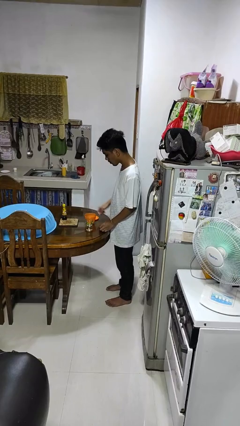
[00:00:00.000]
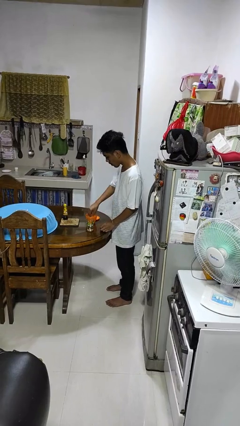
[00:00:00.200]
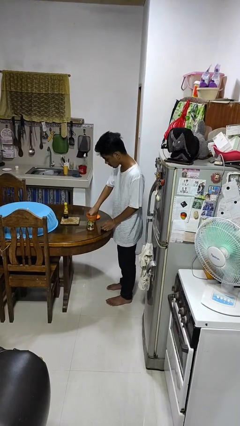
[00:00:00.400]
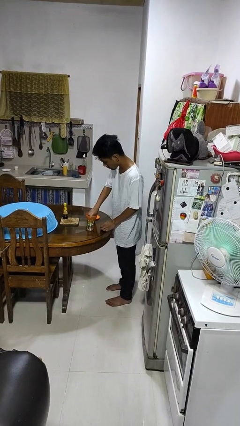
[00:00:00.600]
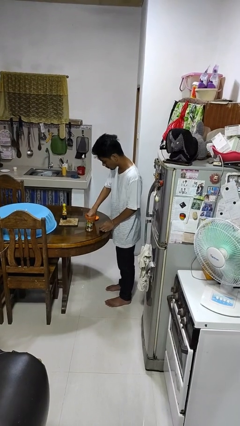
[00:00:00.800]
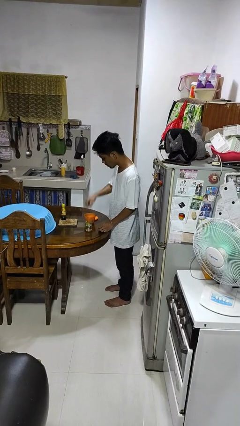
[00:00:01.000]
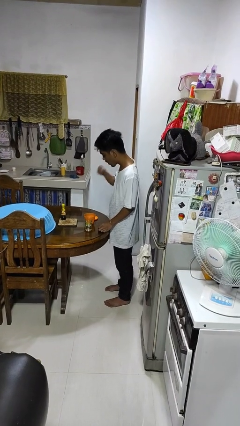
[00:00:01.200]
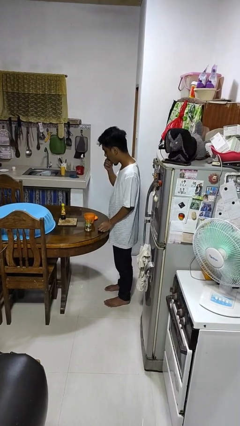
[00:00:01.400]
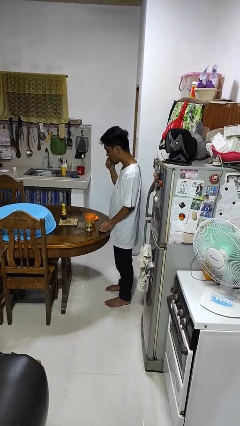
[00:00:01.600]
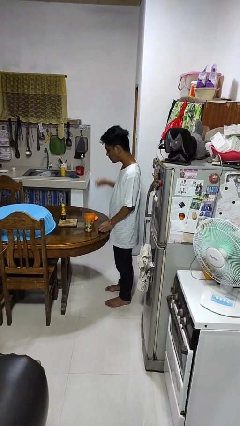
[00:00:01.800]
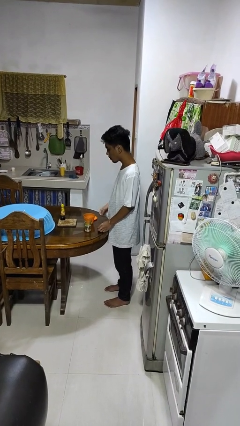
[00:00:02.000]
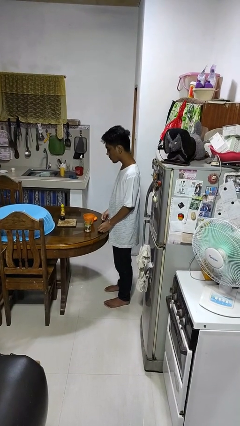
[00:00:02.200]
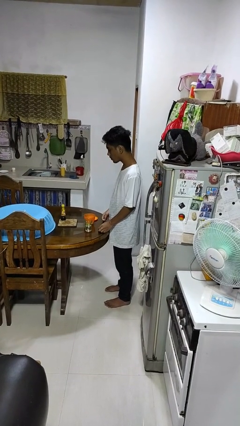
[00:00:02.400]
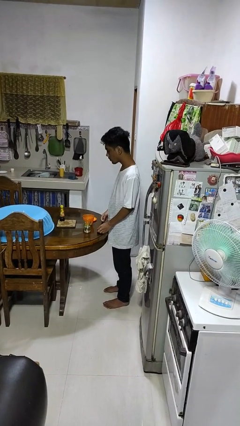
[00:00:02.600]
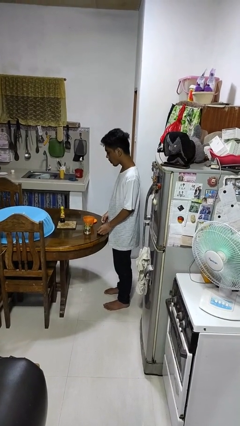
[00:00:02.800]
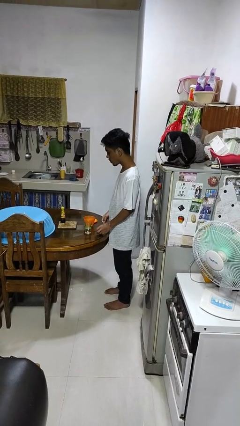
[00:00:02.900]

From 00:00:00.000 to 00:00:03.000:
person takes medicine pills

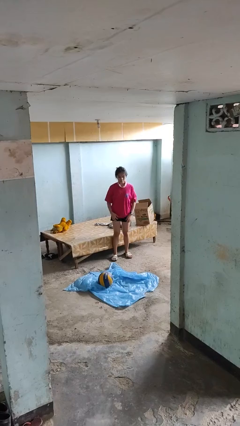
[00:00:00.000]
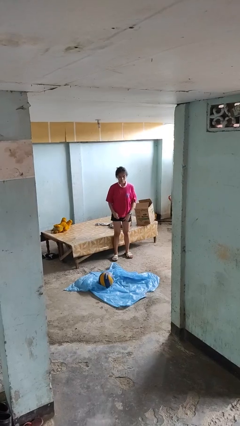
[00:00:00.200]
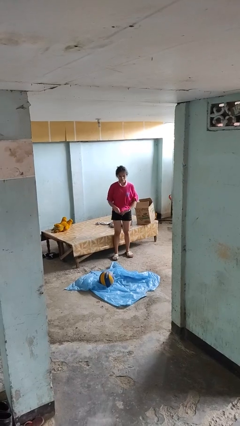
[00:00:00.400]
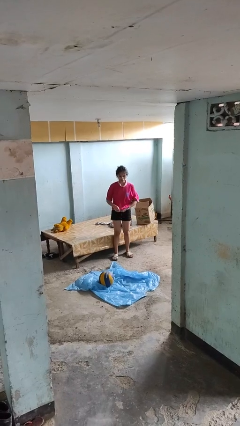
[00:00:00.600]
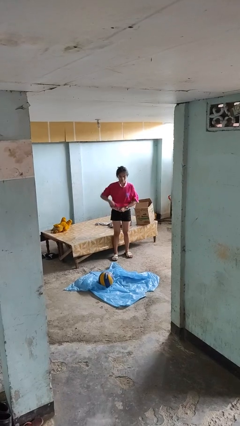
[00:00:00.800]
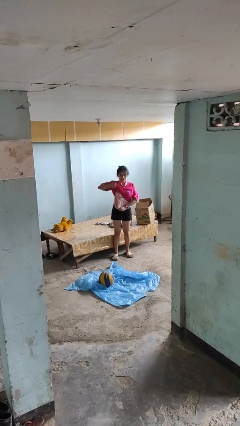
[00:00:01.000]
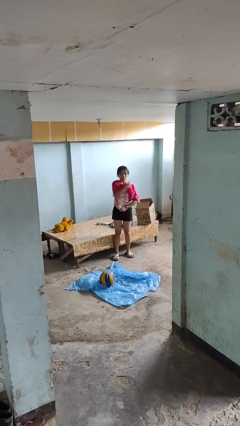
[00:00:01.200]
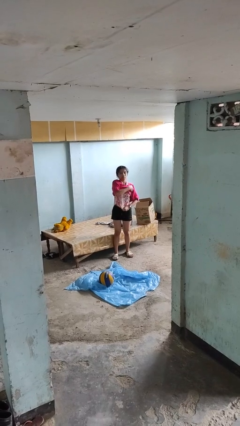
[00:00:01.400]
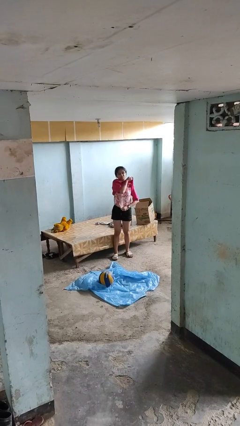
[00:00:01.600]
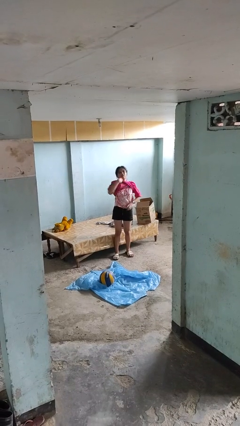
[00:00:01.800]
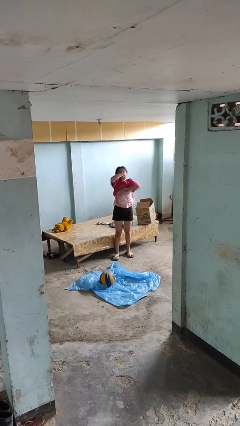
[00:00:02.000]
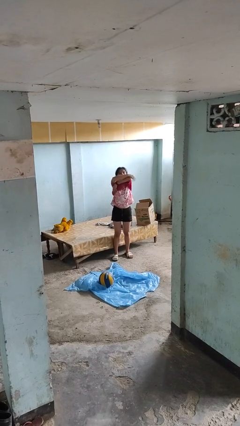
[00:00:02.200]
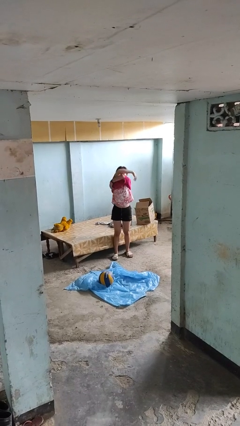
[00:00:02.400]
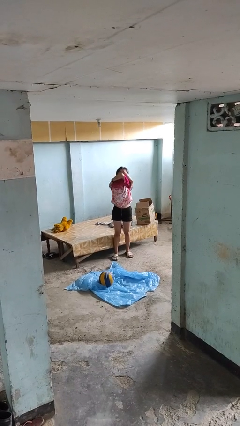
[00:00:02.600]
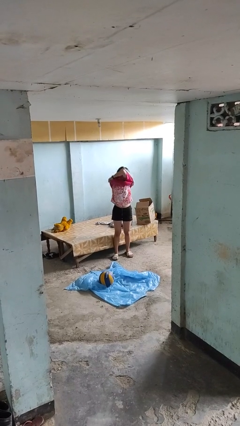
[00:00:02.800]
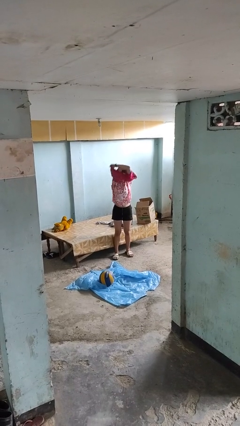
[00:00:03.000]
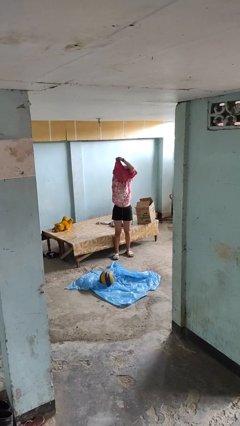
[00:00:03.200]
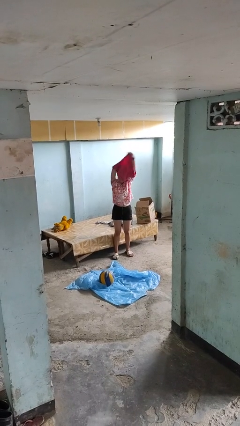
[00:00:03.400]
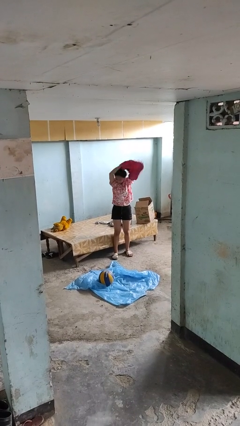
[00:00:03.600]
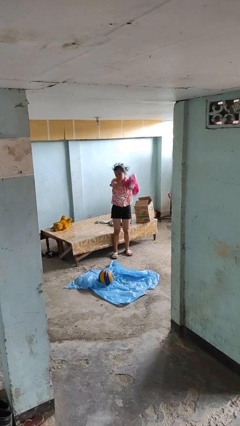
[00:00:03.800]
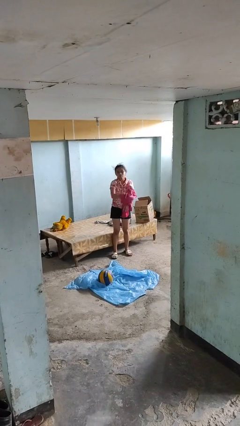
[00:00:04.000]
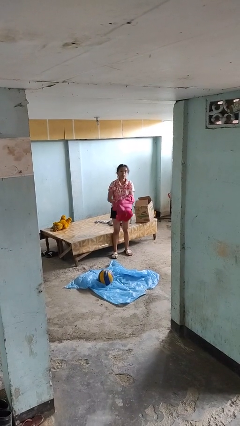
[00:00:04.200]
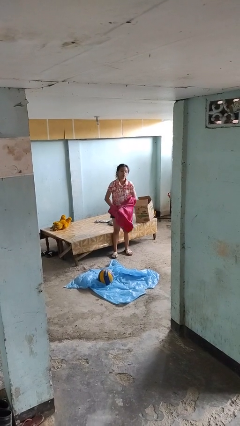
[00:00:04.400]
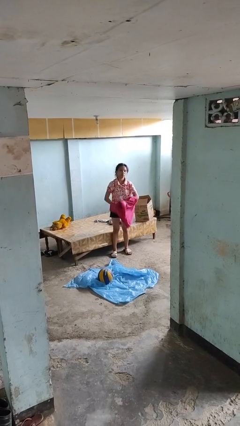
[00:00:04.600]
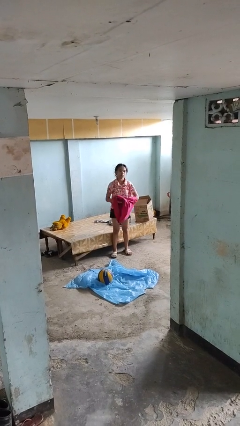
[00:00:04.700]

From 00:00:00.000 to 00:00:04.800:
person takes off shirt

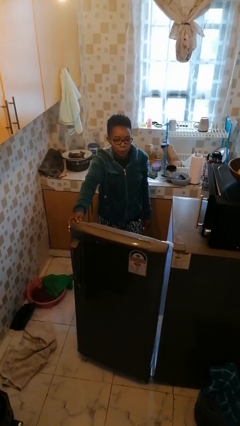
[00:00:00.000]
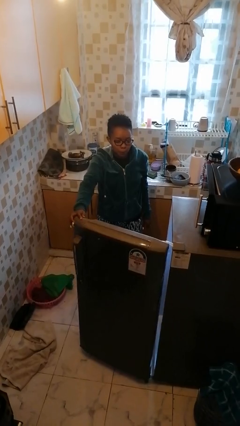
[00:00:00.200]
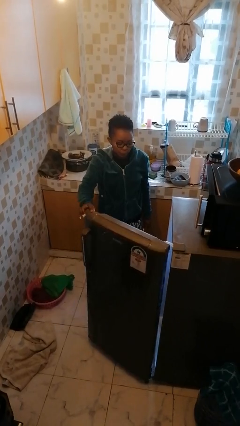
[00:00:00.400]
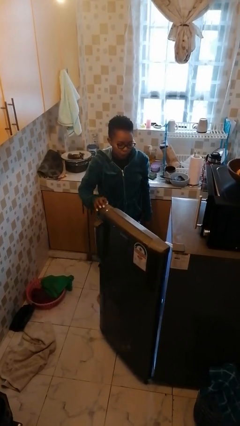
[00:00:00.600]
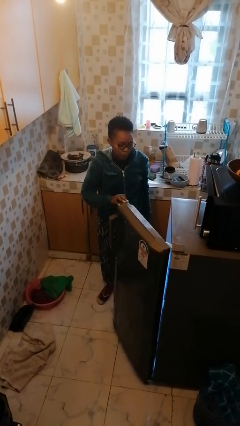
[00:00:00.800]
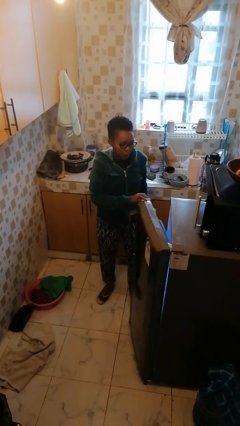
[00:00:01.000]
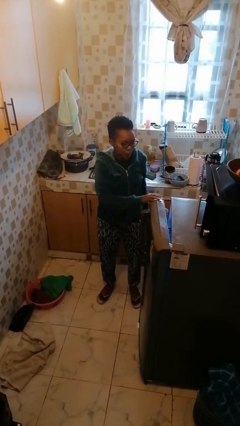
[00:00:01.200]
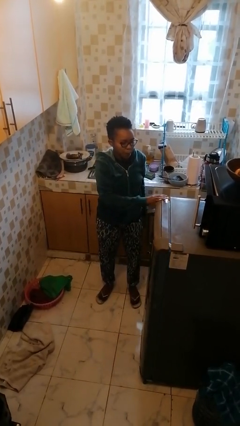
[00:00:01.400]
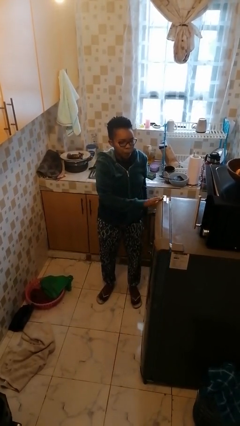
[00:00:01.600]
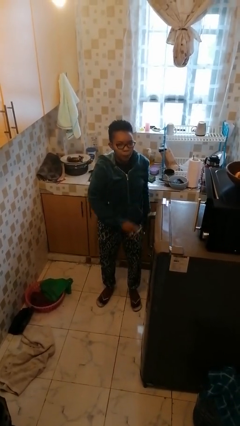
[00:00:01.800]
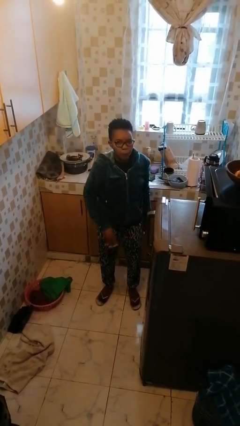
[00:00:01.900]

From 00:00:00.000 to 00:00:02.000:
person closes refrigerator

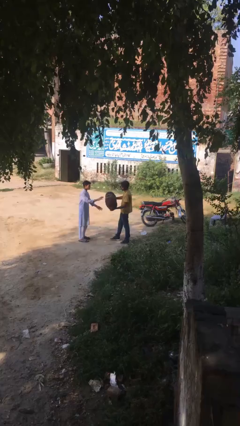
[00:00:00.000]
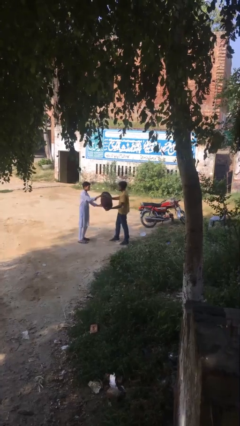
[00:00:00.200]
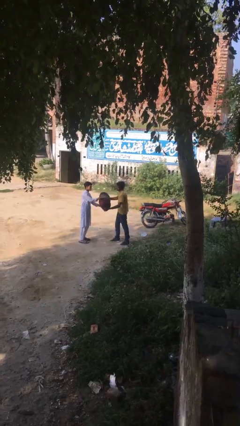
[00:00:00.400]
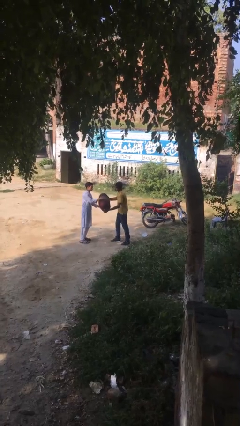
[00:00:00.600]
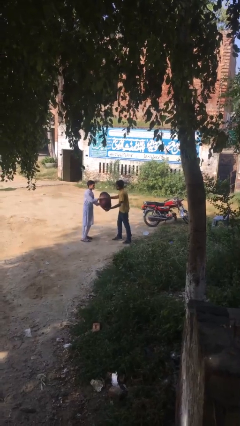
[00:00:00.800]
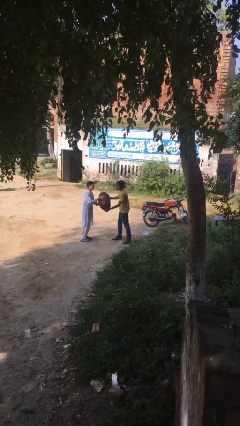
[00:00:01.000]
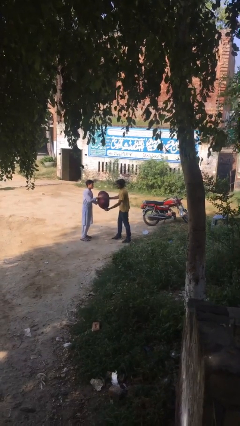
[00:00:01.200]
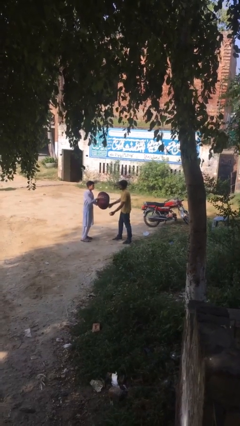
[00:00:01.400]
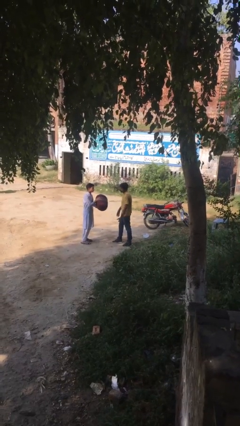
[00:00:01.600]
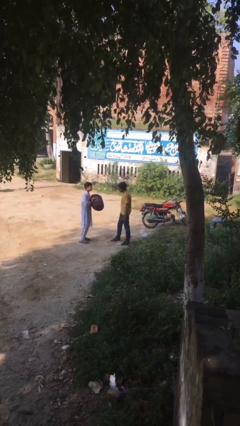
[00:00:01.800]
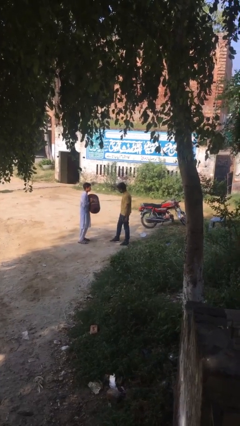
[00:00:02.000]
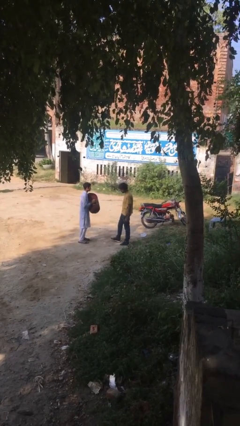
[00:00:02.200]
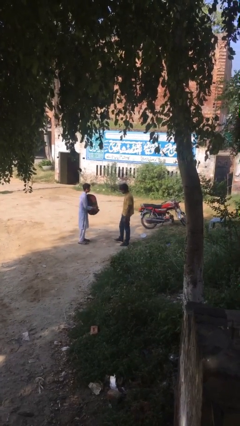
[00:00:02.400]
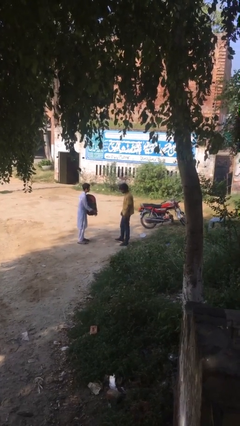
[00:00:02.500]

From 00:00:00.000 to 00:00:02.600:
person transfers object to person

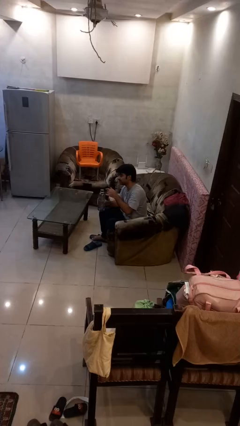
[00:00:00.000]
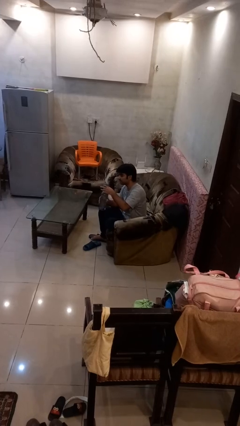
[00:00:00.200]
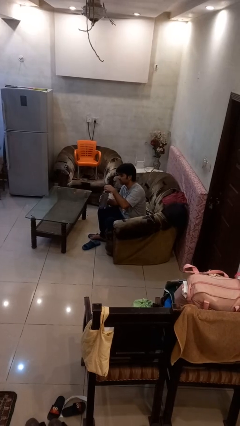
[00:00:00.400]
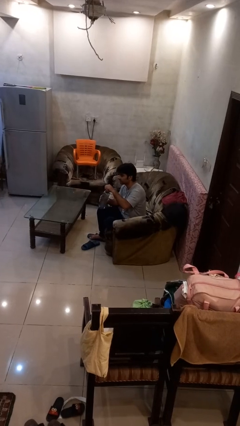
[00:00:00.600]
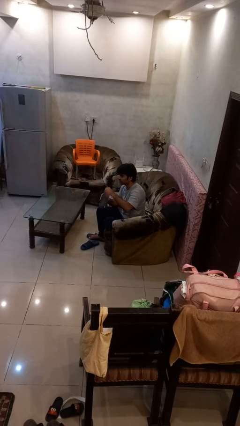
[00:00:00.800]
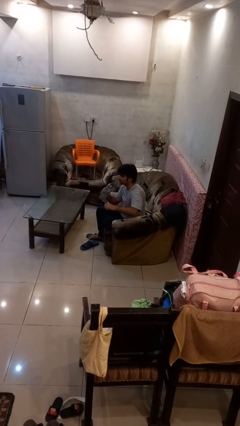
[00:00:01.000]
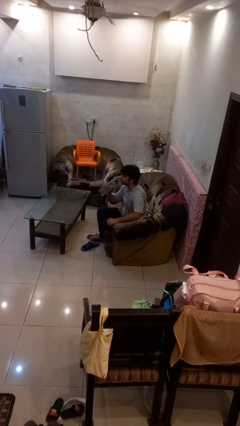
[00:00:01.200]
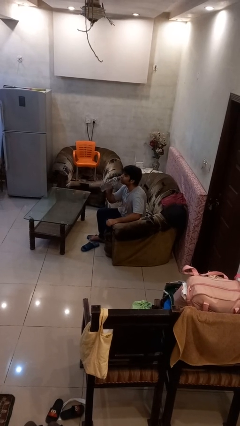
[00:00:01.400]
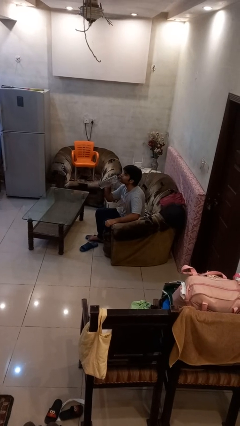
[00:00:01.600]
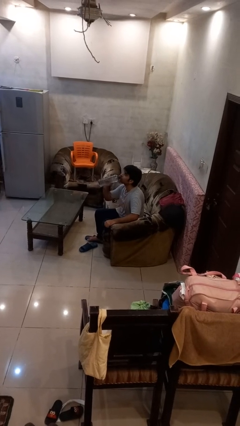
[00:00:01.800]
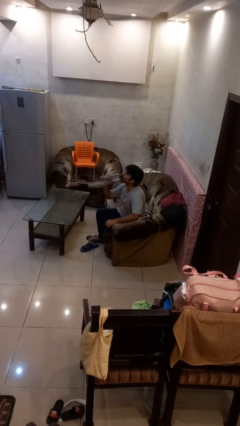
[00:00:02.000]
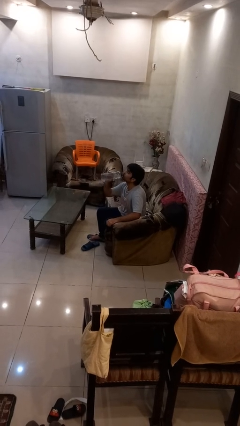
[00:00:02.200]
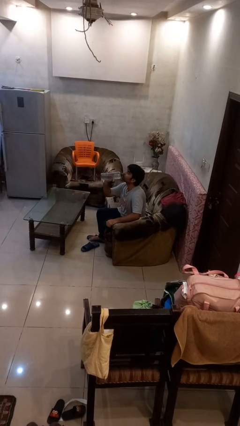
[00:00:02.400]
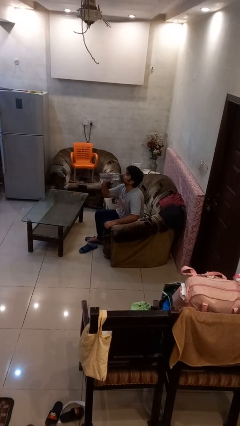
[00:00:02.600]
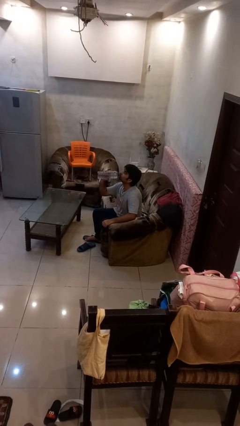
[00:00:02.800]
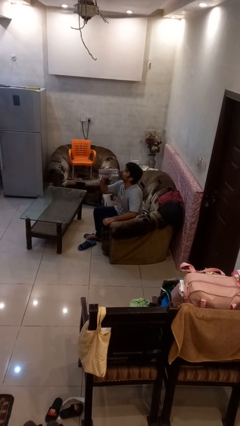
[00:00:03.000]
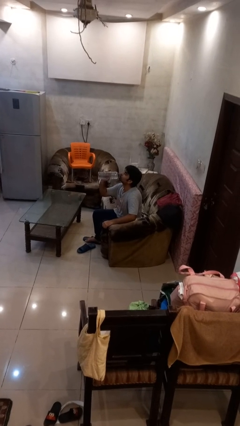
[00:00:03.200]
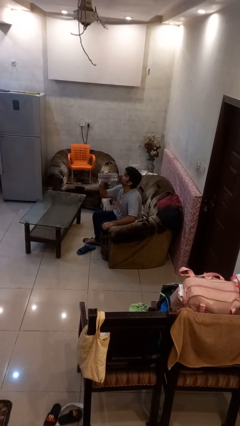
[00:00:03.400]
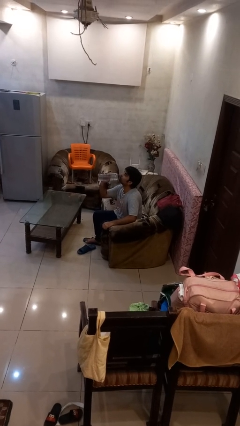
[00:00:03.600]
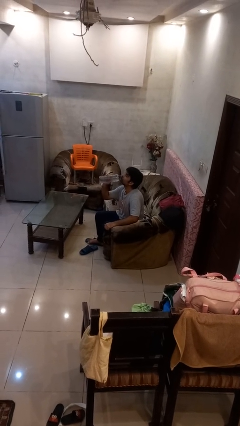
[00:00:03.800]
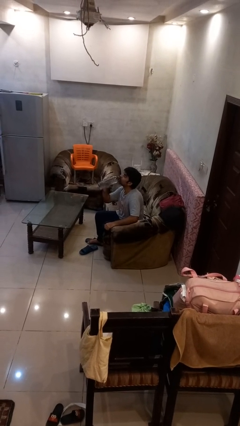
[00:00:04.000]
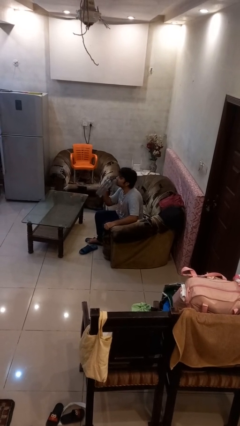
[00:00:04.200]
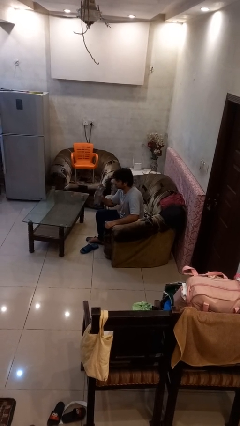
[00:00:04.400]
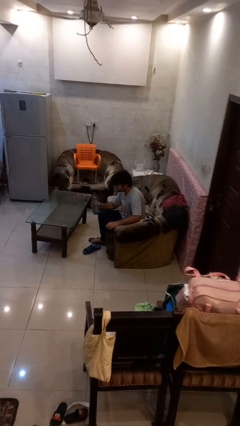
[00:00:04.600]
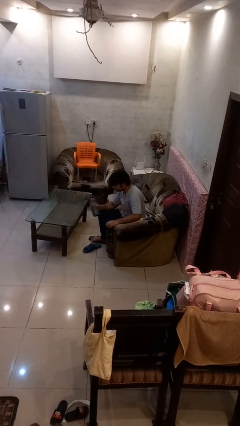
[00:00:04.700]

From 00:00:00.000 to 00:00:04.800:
person drinks from bottle
